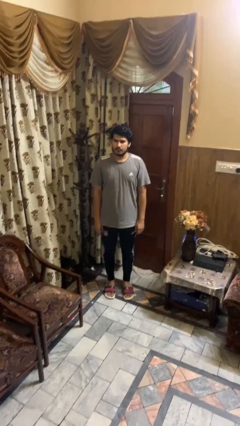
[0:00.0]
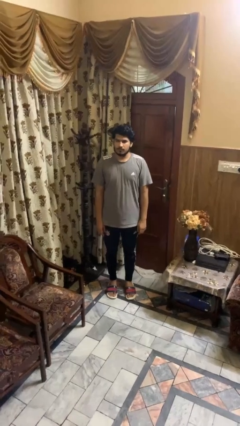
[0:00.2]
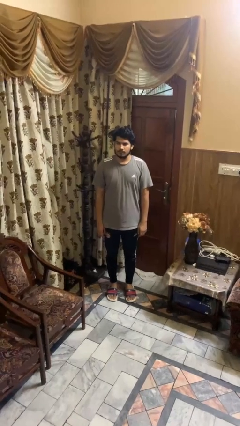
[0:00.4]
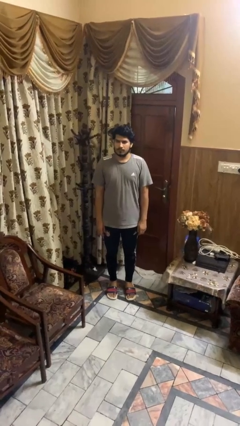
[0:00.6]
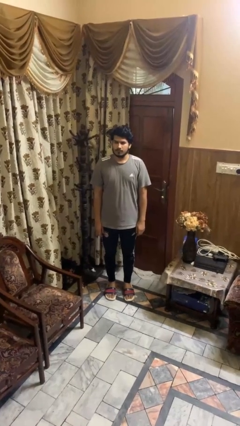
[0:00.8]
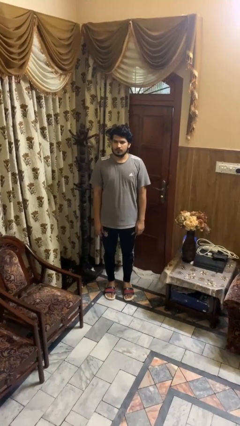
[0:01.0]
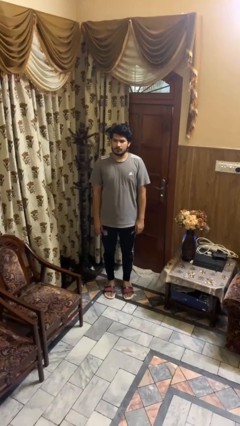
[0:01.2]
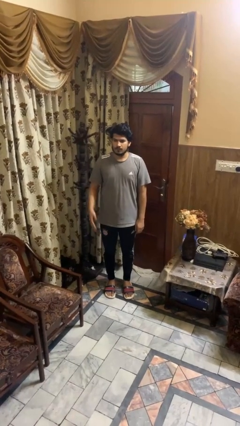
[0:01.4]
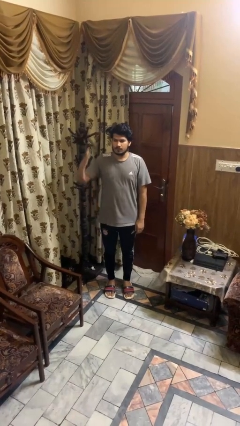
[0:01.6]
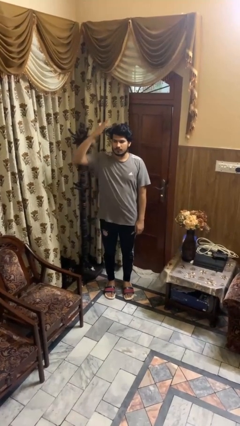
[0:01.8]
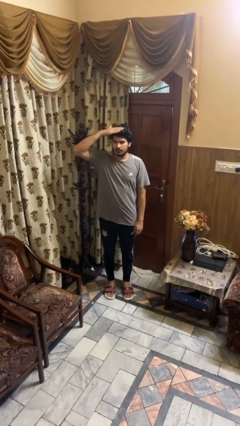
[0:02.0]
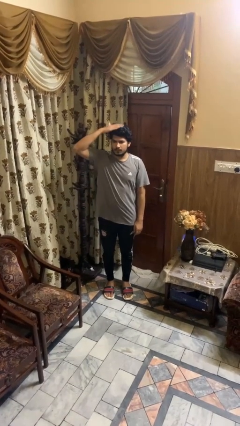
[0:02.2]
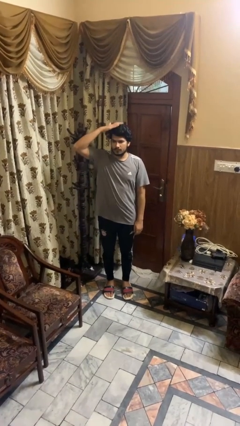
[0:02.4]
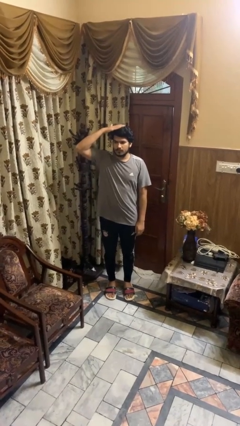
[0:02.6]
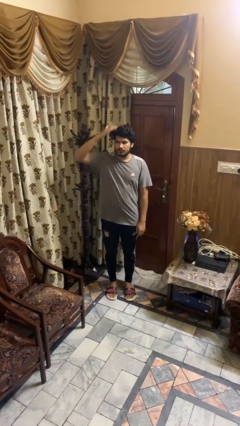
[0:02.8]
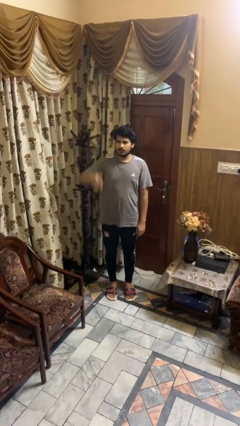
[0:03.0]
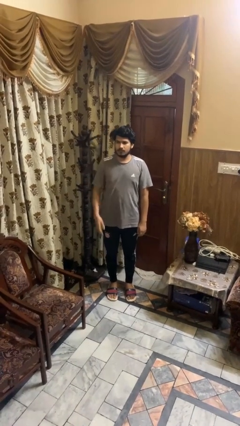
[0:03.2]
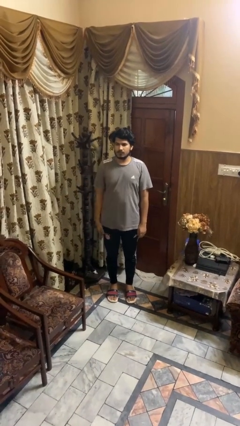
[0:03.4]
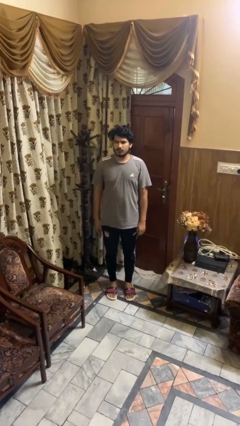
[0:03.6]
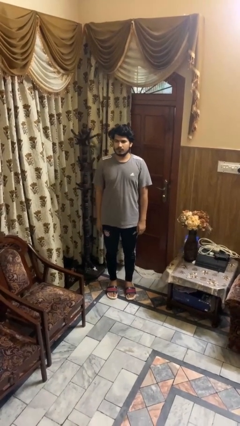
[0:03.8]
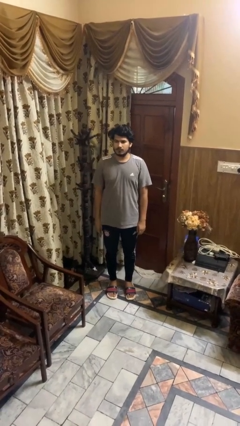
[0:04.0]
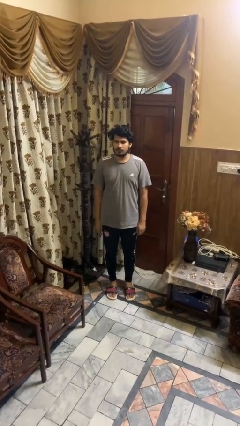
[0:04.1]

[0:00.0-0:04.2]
person pats head

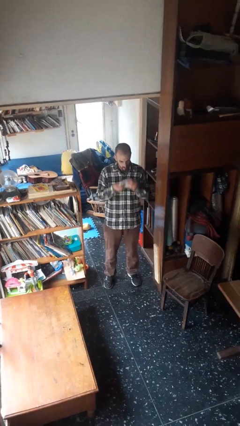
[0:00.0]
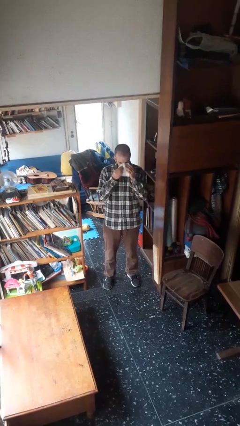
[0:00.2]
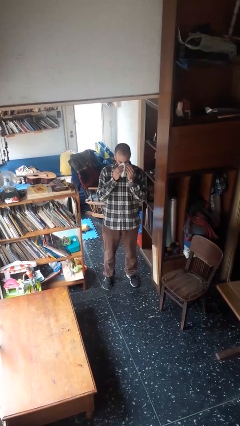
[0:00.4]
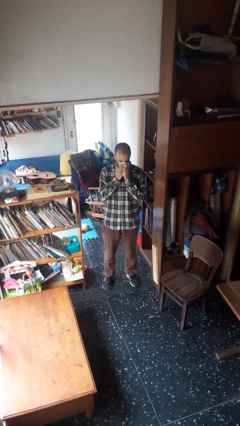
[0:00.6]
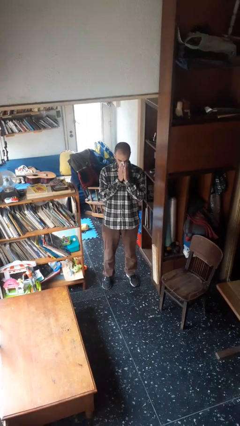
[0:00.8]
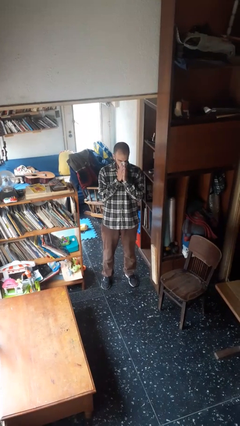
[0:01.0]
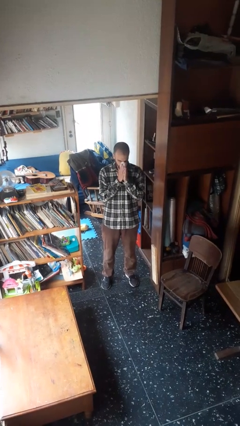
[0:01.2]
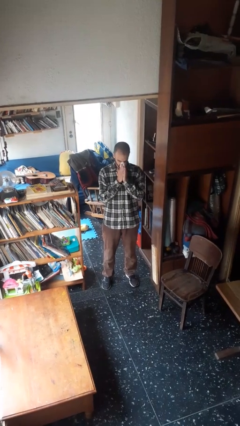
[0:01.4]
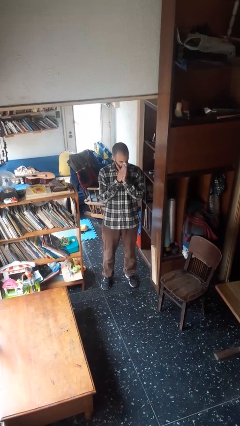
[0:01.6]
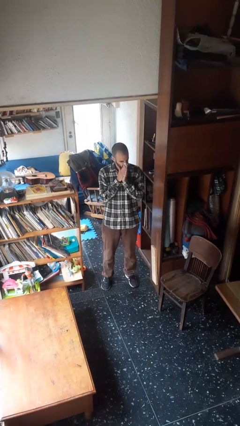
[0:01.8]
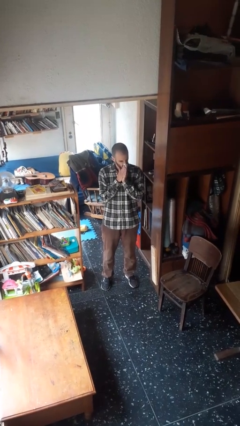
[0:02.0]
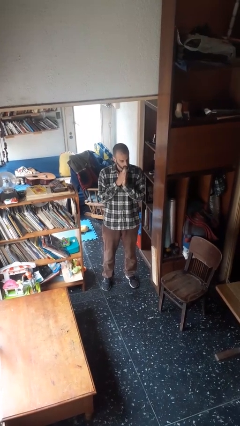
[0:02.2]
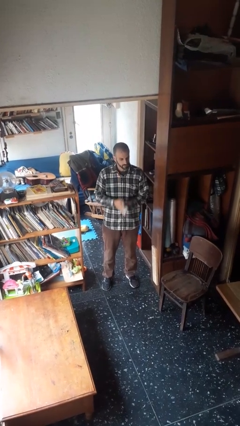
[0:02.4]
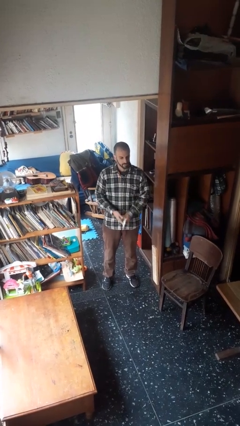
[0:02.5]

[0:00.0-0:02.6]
person blows nose

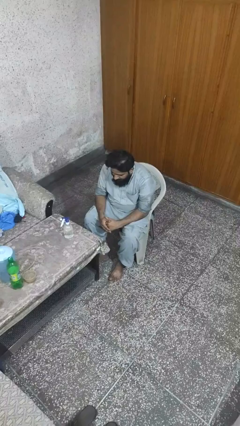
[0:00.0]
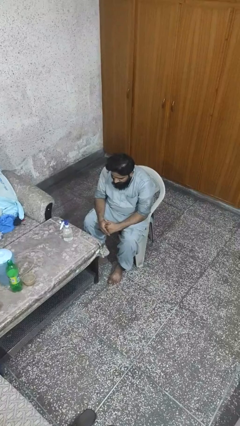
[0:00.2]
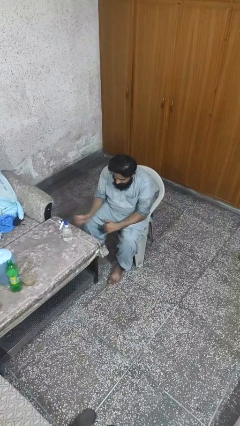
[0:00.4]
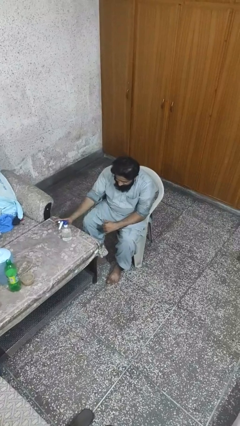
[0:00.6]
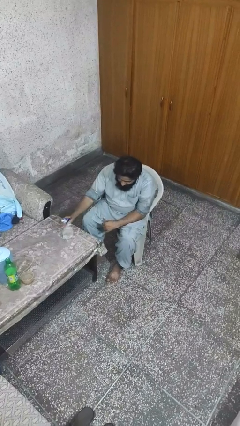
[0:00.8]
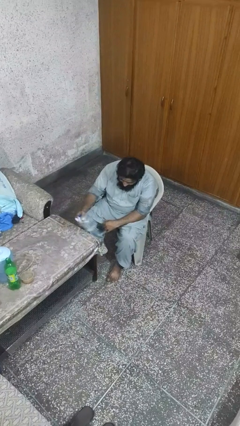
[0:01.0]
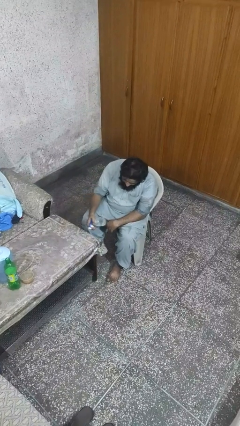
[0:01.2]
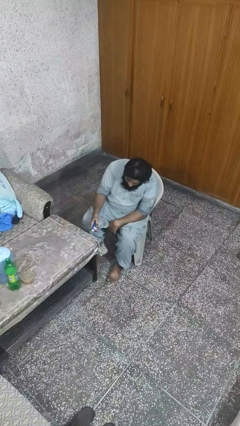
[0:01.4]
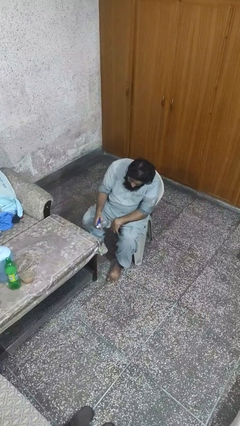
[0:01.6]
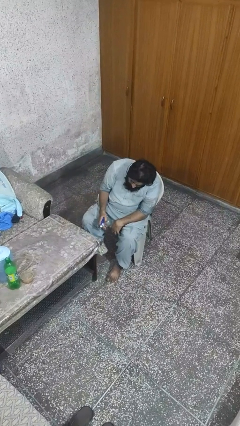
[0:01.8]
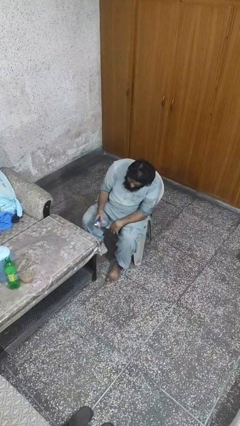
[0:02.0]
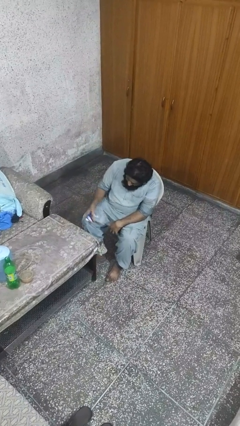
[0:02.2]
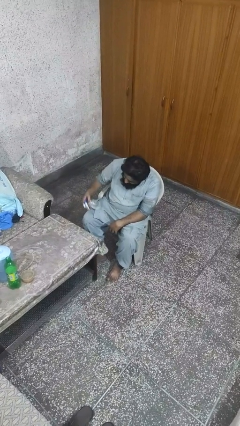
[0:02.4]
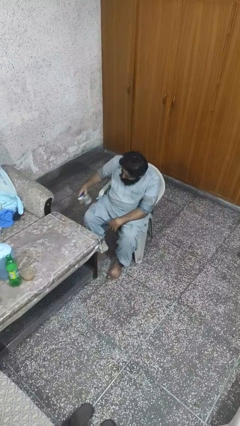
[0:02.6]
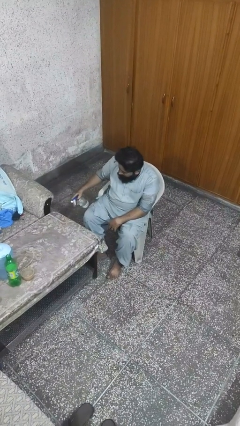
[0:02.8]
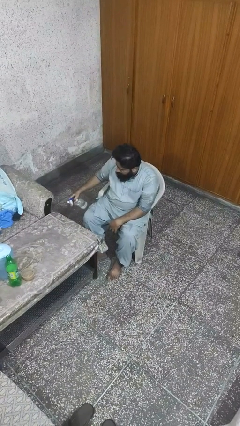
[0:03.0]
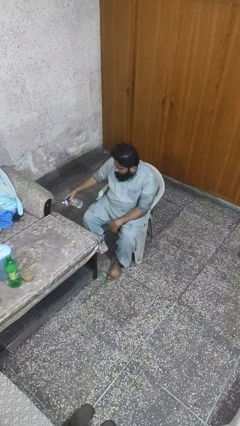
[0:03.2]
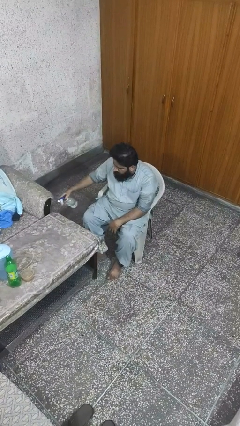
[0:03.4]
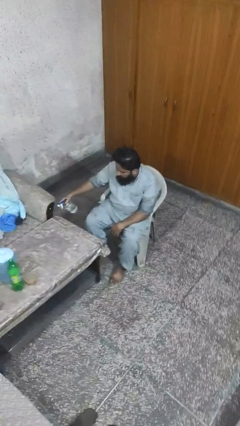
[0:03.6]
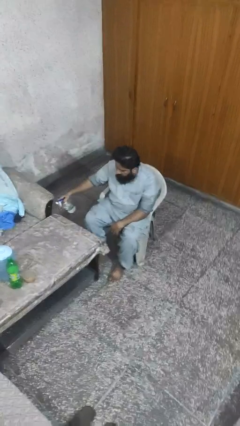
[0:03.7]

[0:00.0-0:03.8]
person sprays from bottle

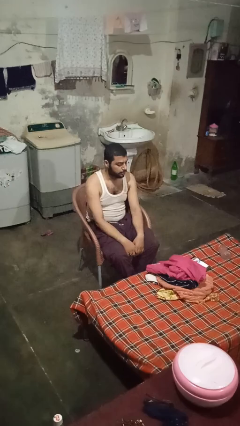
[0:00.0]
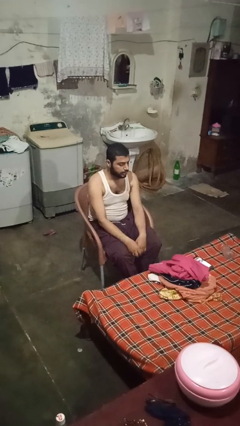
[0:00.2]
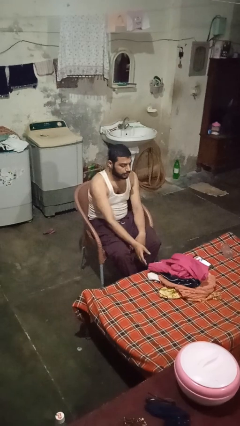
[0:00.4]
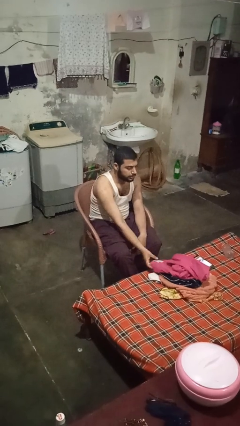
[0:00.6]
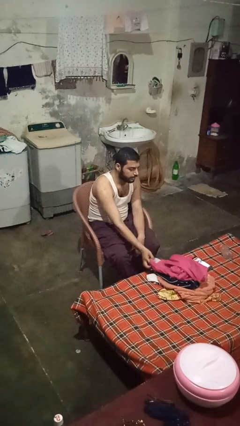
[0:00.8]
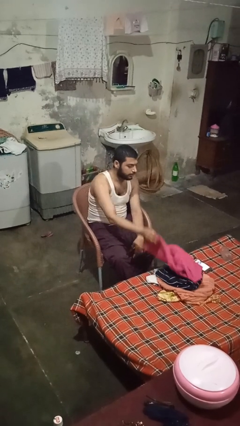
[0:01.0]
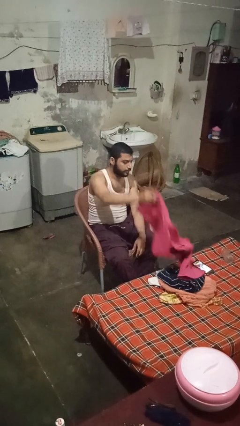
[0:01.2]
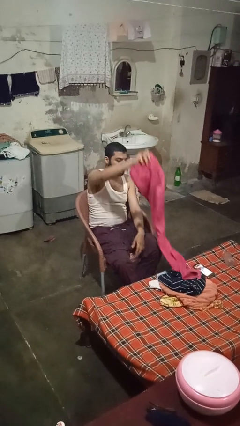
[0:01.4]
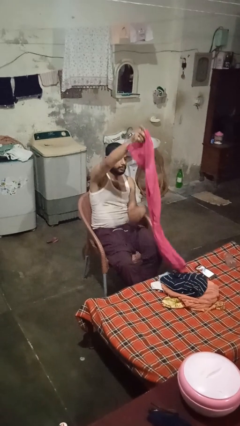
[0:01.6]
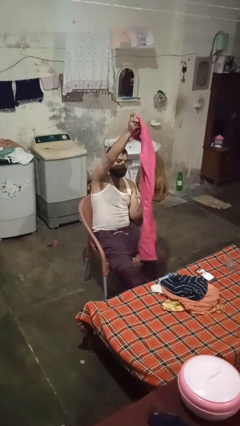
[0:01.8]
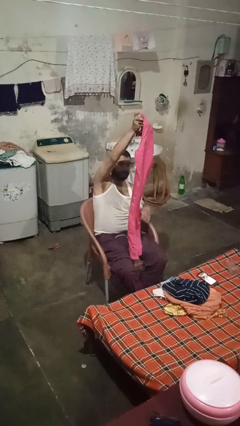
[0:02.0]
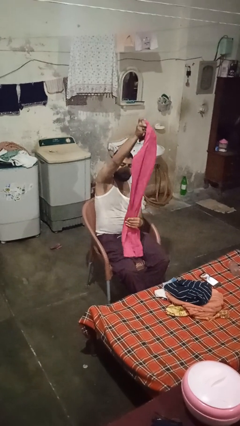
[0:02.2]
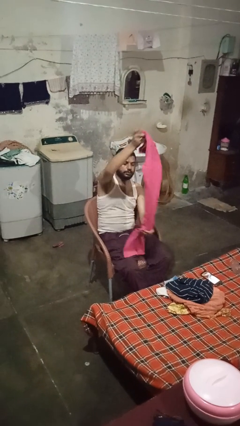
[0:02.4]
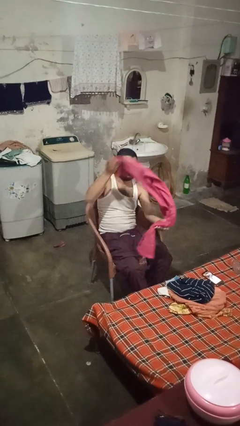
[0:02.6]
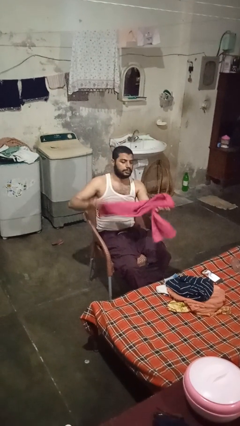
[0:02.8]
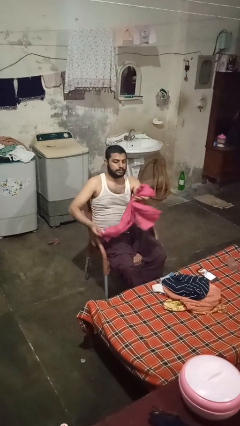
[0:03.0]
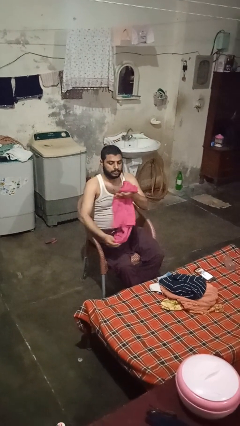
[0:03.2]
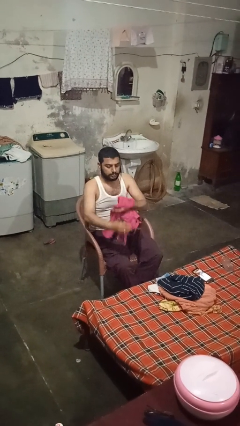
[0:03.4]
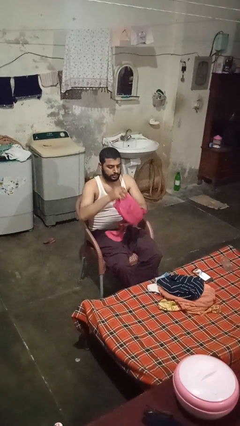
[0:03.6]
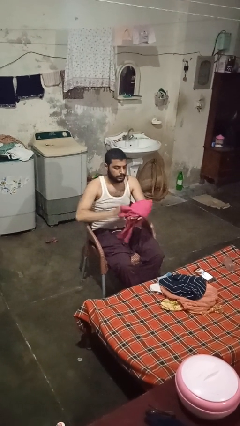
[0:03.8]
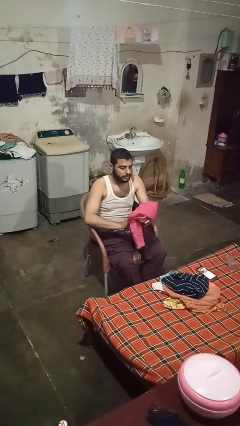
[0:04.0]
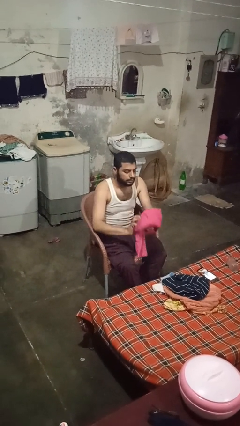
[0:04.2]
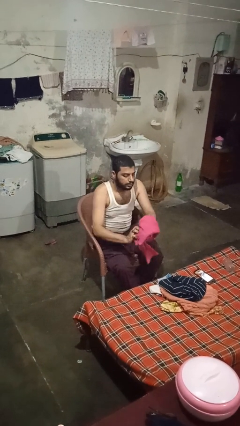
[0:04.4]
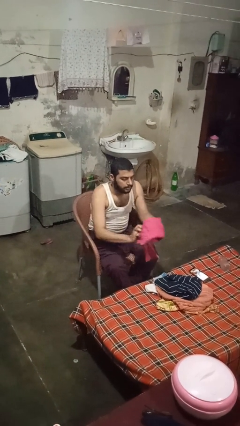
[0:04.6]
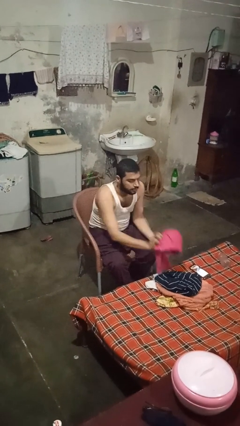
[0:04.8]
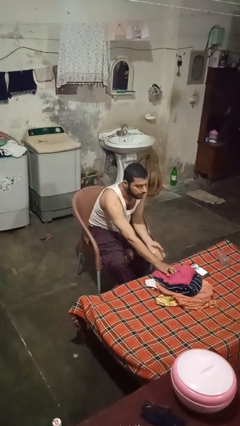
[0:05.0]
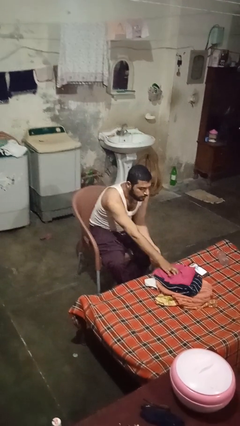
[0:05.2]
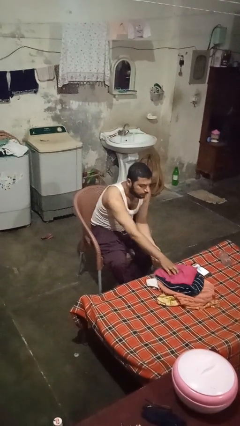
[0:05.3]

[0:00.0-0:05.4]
person folds pants

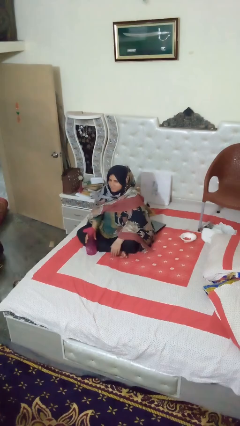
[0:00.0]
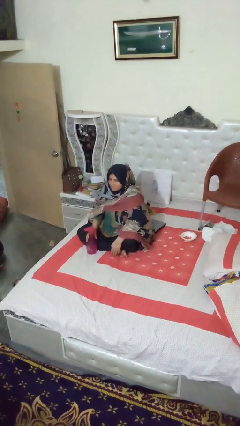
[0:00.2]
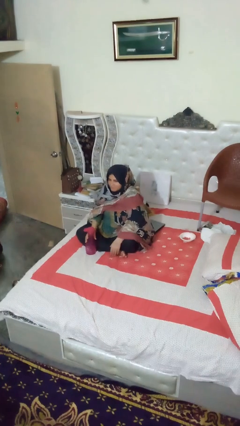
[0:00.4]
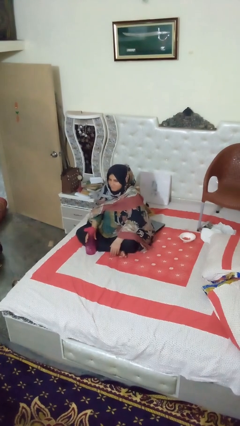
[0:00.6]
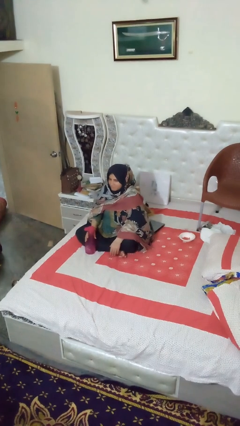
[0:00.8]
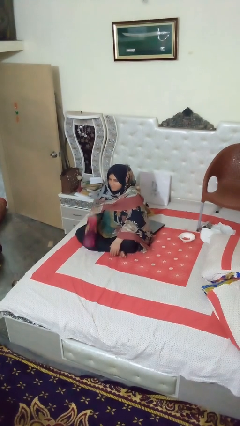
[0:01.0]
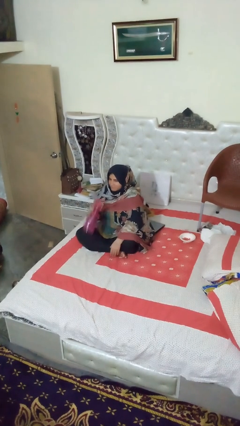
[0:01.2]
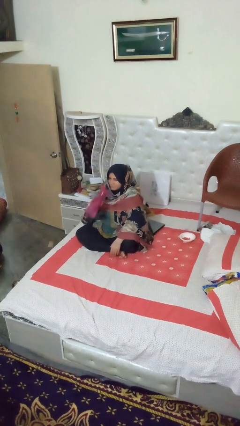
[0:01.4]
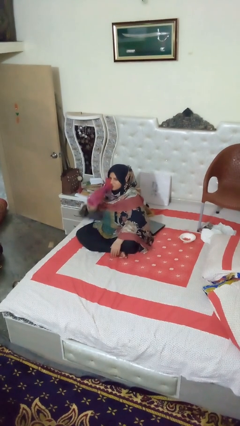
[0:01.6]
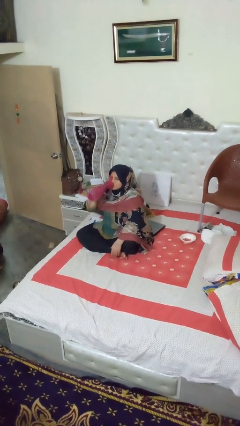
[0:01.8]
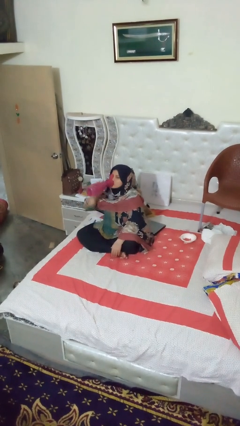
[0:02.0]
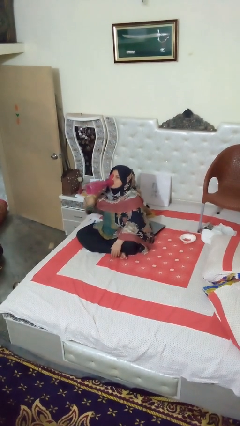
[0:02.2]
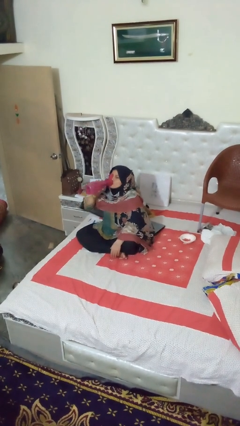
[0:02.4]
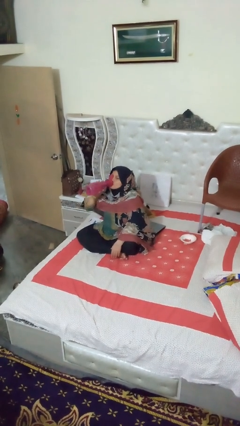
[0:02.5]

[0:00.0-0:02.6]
person drinks from bottle
